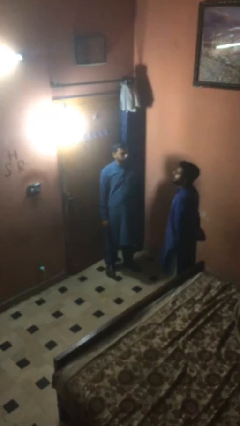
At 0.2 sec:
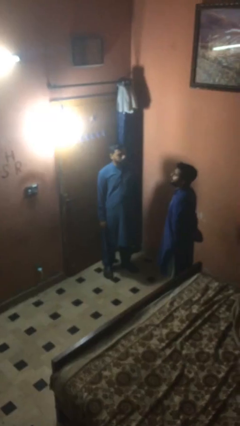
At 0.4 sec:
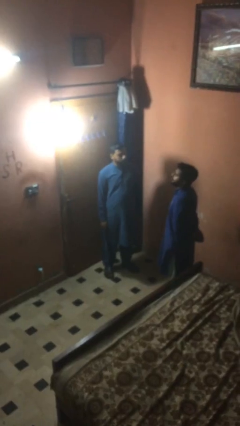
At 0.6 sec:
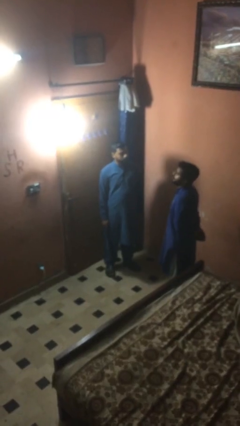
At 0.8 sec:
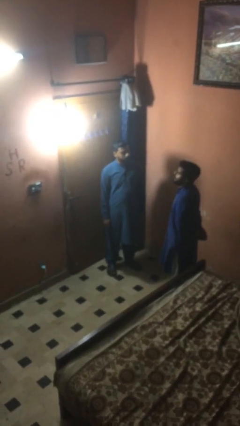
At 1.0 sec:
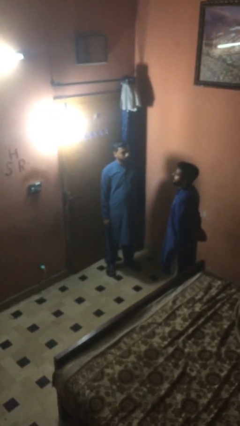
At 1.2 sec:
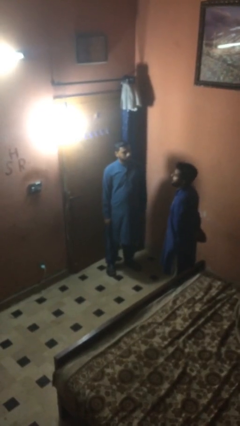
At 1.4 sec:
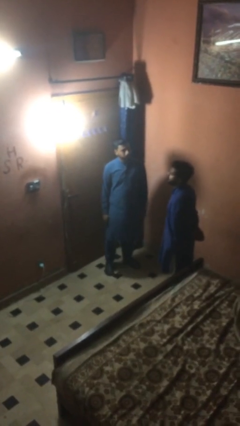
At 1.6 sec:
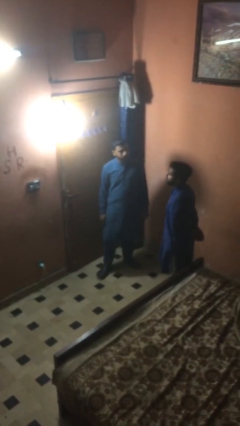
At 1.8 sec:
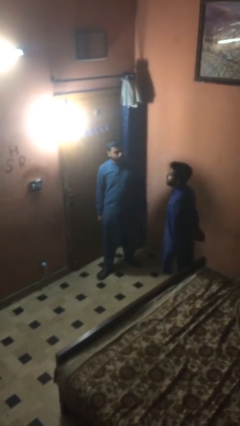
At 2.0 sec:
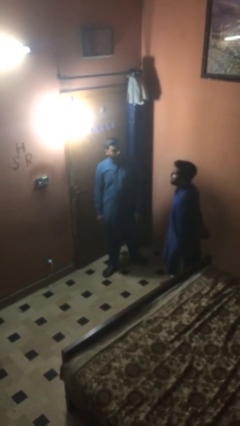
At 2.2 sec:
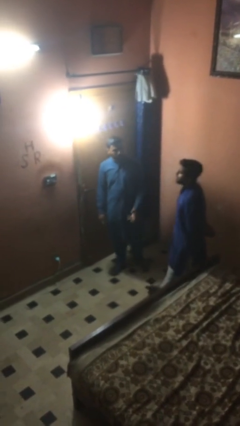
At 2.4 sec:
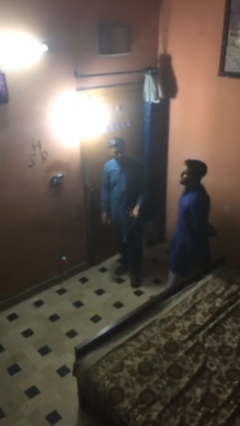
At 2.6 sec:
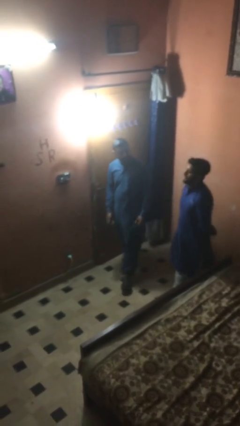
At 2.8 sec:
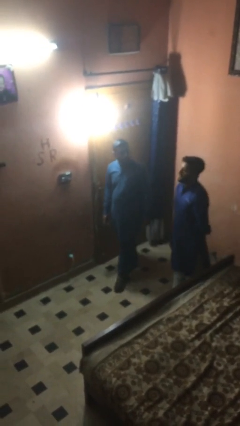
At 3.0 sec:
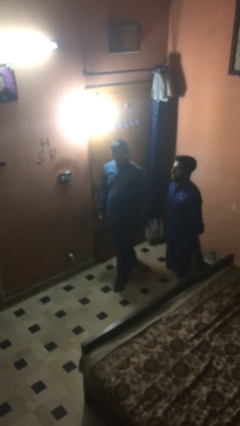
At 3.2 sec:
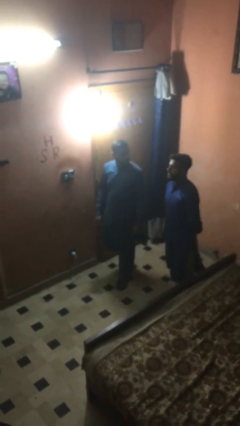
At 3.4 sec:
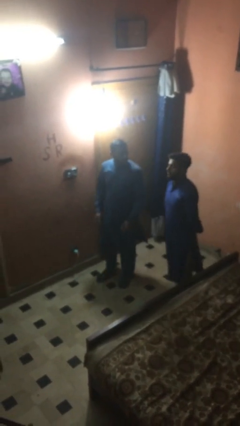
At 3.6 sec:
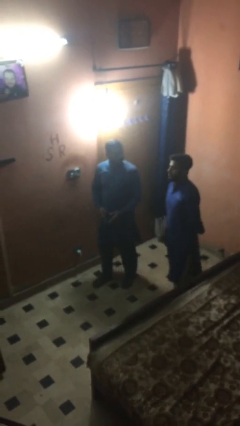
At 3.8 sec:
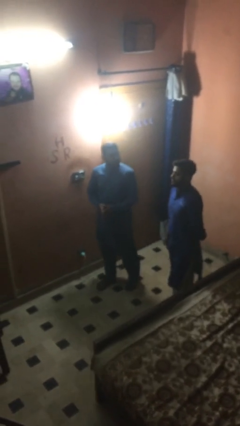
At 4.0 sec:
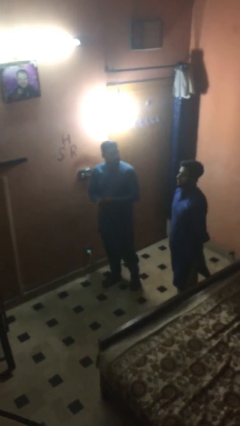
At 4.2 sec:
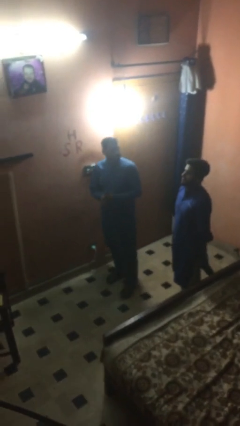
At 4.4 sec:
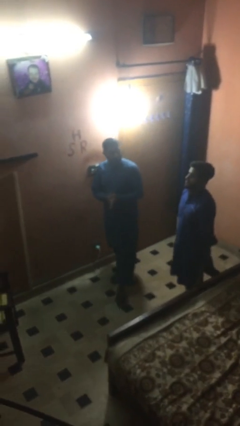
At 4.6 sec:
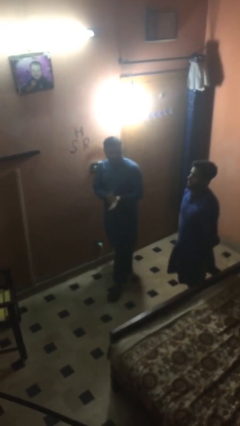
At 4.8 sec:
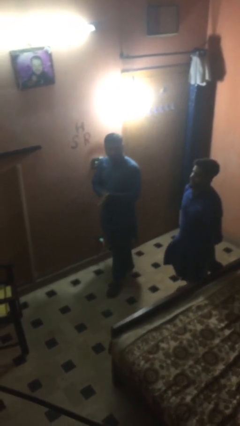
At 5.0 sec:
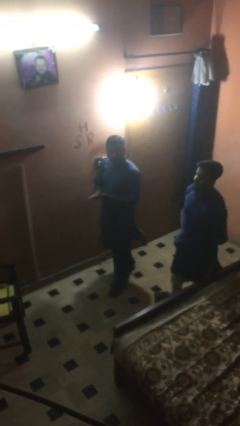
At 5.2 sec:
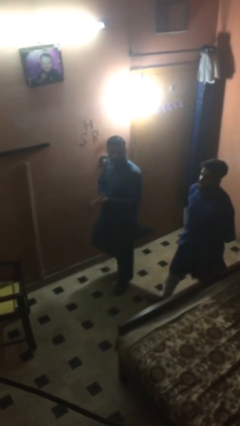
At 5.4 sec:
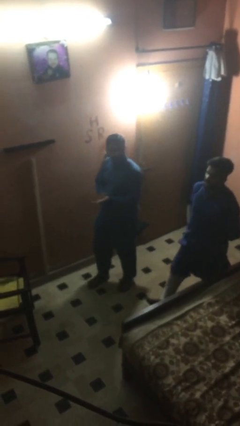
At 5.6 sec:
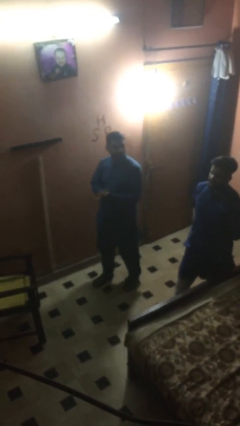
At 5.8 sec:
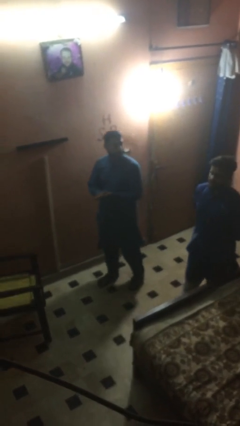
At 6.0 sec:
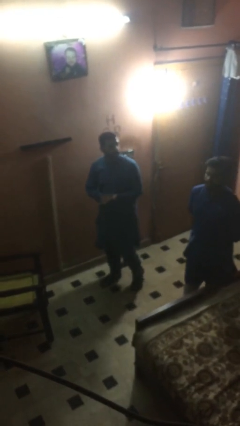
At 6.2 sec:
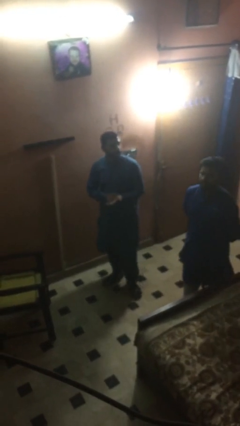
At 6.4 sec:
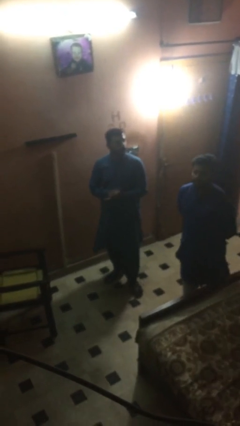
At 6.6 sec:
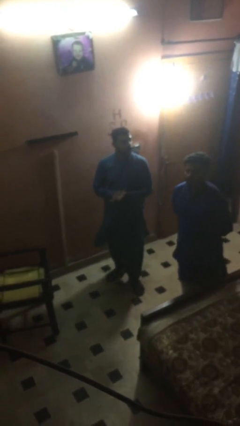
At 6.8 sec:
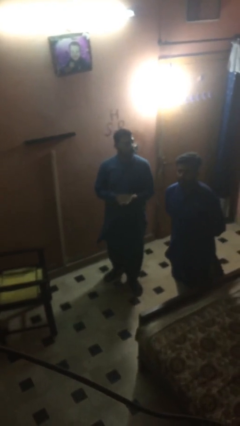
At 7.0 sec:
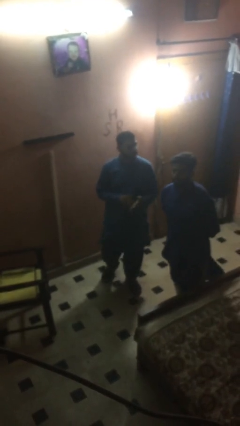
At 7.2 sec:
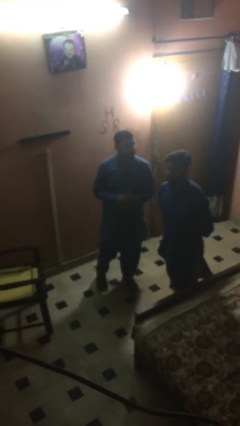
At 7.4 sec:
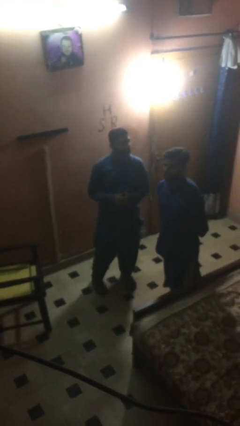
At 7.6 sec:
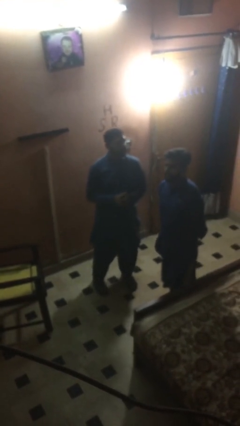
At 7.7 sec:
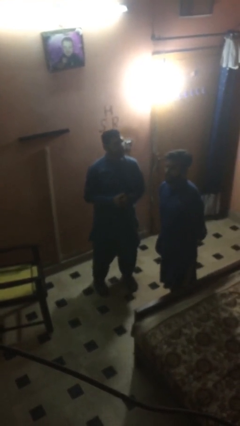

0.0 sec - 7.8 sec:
person talks to person

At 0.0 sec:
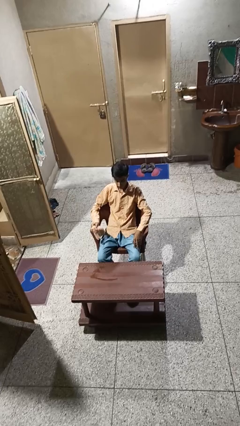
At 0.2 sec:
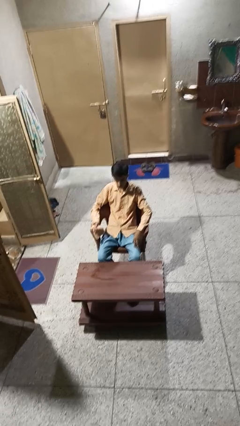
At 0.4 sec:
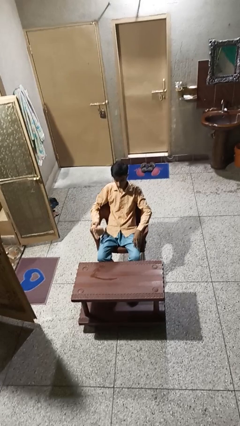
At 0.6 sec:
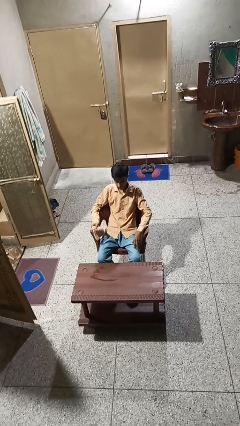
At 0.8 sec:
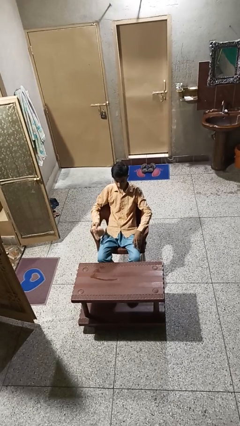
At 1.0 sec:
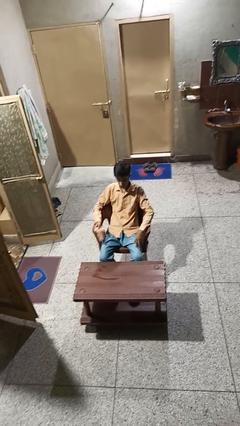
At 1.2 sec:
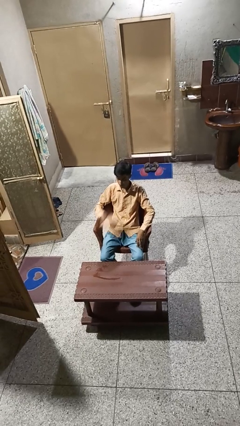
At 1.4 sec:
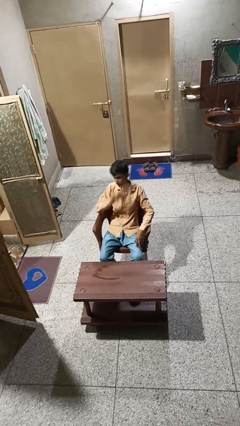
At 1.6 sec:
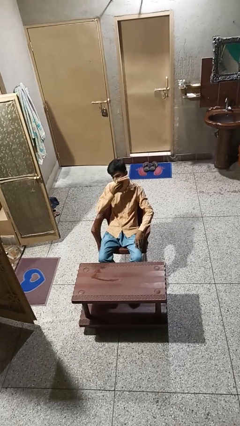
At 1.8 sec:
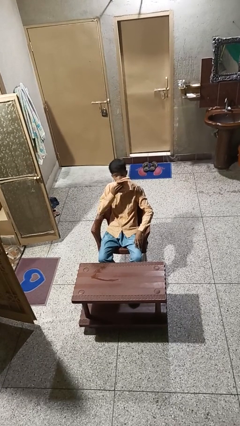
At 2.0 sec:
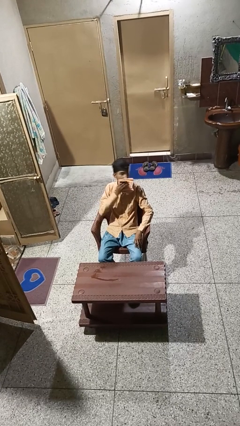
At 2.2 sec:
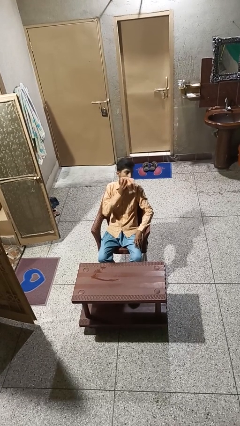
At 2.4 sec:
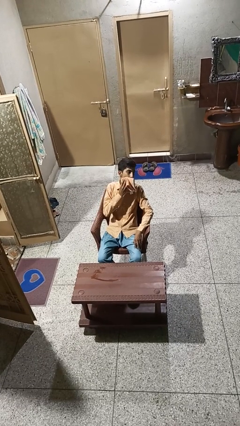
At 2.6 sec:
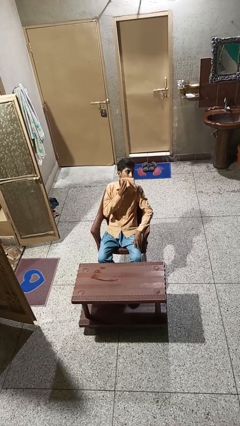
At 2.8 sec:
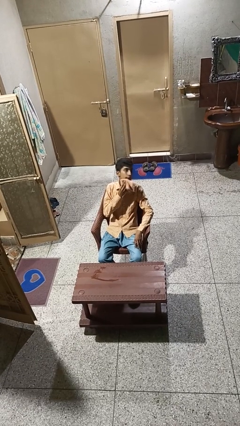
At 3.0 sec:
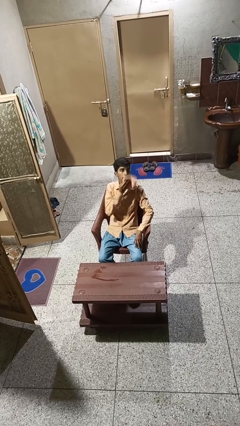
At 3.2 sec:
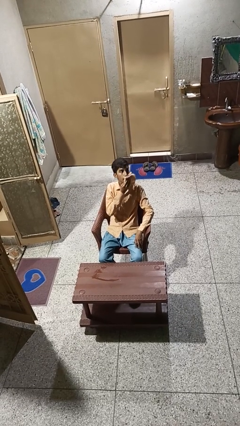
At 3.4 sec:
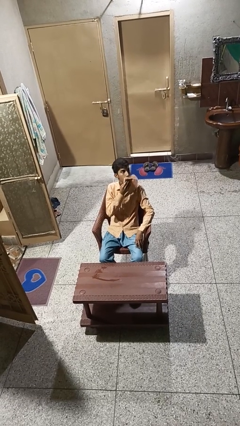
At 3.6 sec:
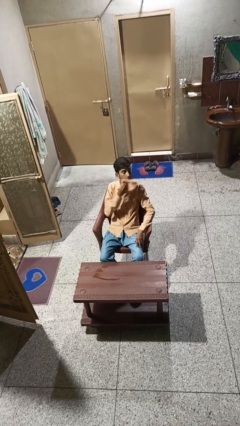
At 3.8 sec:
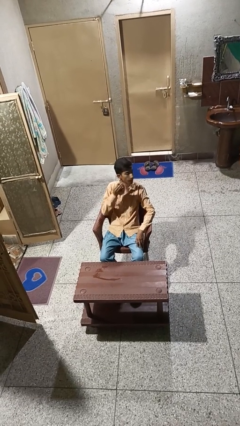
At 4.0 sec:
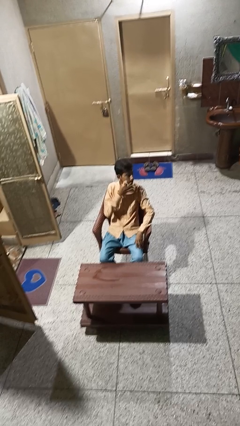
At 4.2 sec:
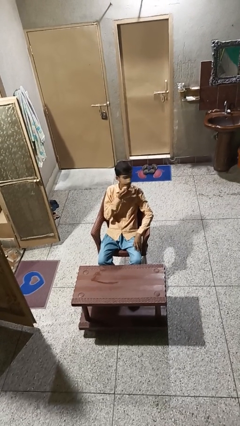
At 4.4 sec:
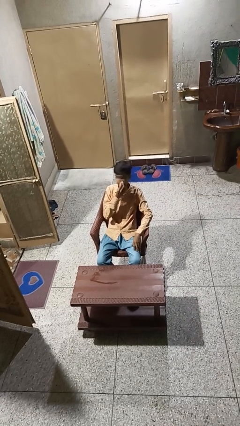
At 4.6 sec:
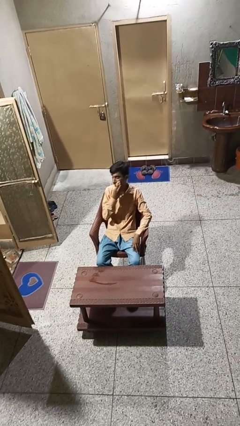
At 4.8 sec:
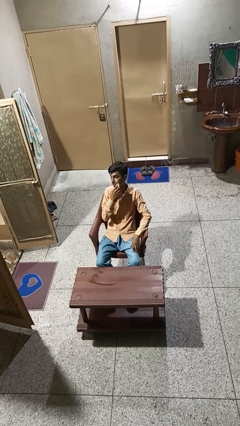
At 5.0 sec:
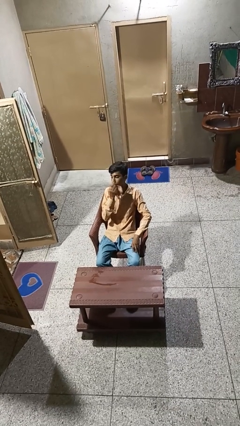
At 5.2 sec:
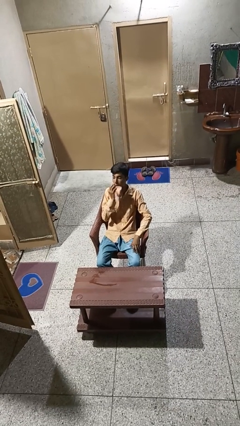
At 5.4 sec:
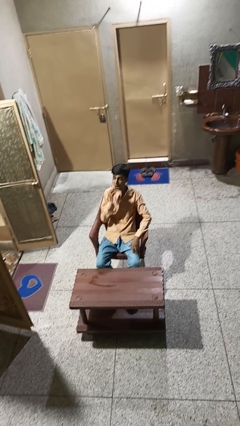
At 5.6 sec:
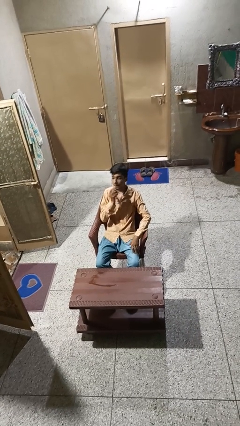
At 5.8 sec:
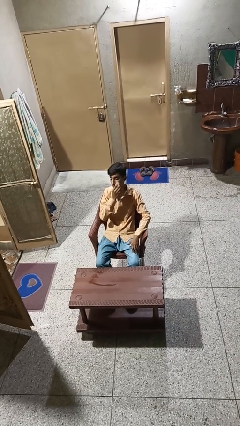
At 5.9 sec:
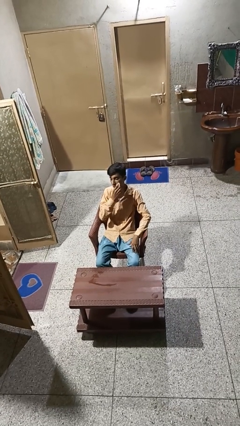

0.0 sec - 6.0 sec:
person wipes mouth with napkin

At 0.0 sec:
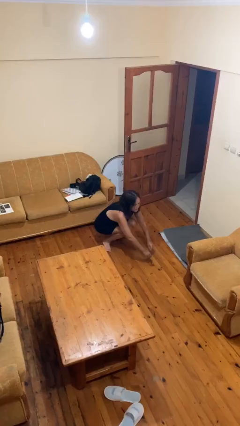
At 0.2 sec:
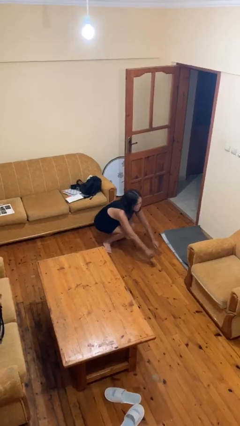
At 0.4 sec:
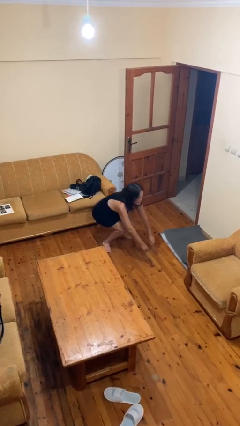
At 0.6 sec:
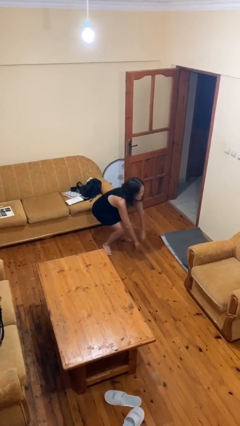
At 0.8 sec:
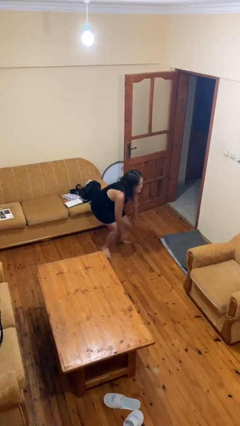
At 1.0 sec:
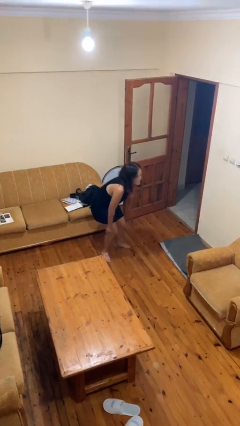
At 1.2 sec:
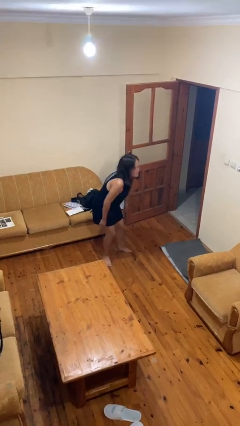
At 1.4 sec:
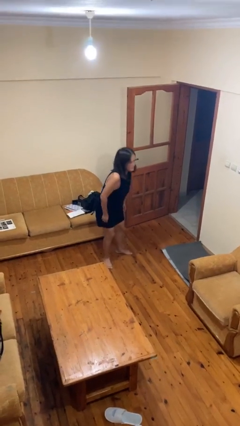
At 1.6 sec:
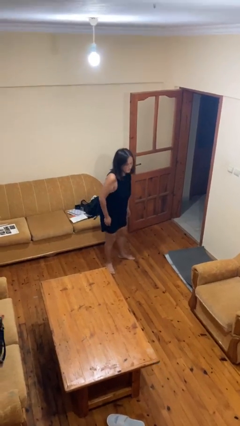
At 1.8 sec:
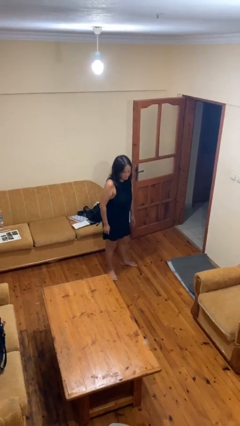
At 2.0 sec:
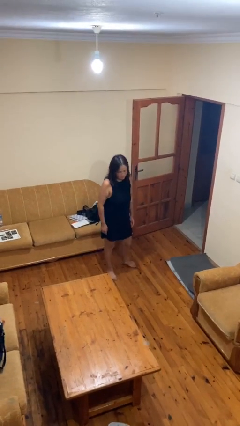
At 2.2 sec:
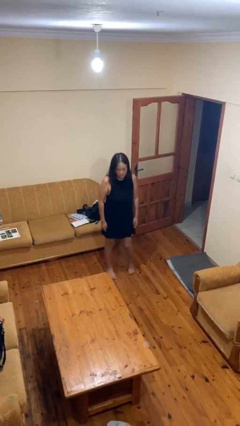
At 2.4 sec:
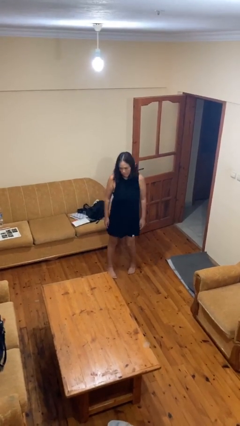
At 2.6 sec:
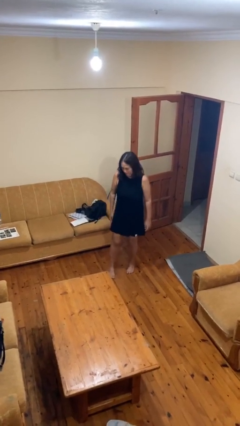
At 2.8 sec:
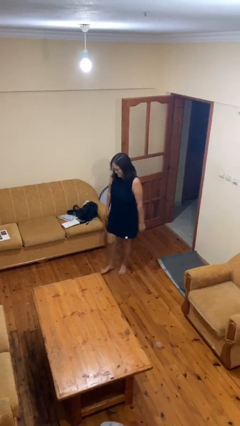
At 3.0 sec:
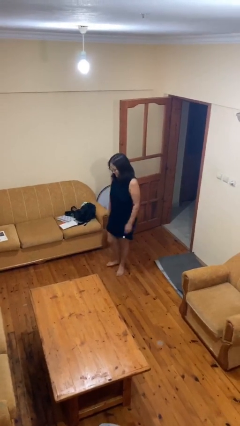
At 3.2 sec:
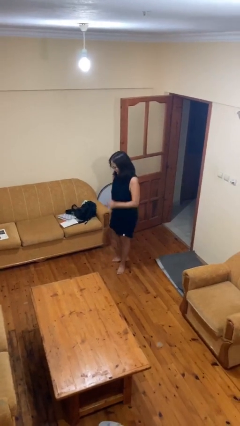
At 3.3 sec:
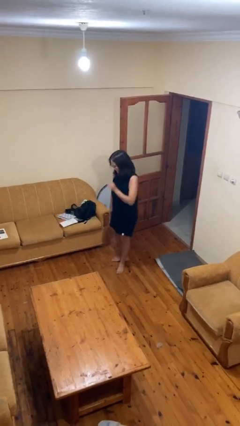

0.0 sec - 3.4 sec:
person stands up

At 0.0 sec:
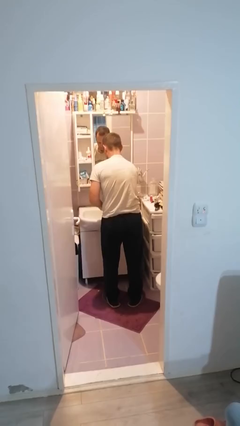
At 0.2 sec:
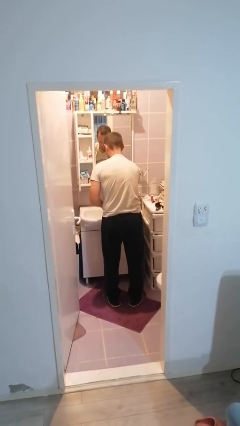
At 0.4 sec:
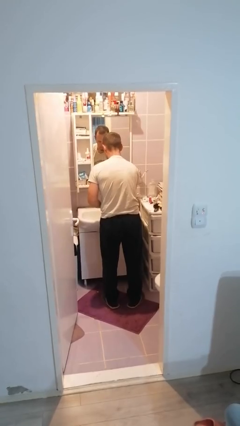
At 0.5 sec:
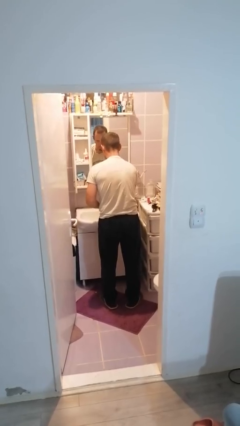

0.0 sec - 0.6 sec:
person applies shaving cream
